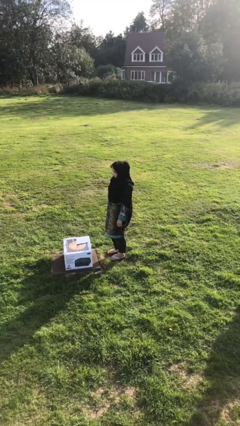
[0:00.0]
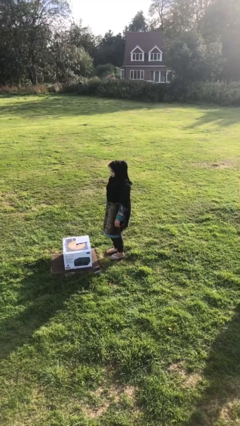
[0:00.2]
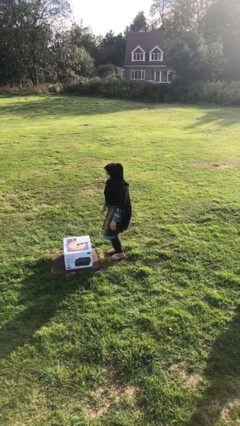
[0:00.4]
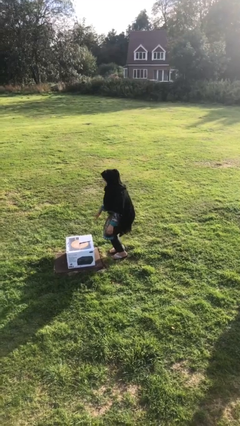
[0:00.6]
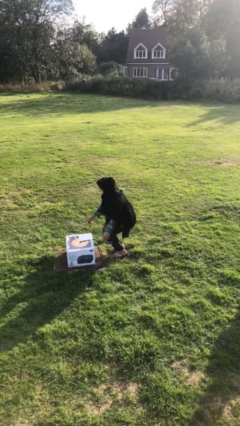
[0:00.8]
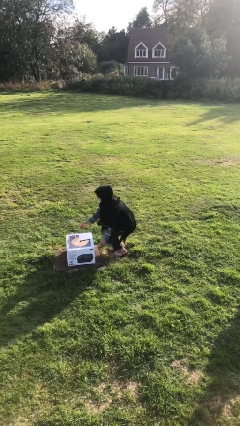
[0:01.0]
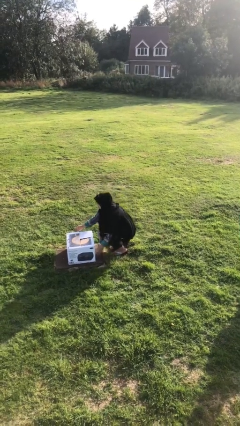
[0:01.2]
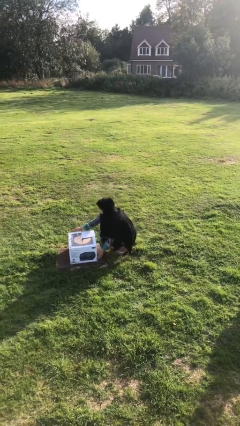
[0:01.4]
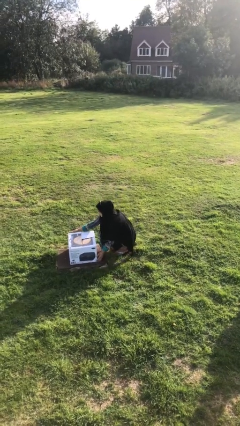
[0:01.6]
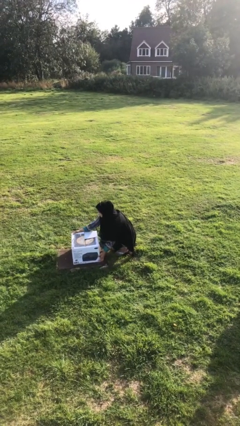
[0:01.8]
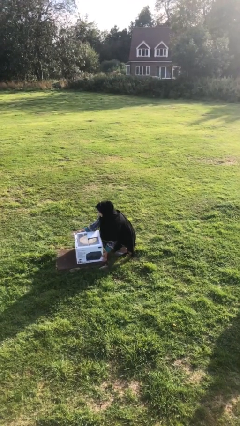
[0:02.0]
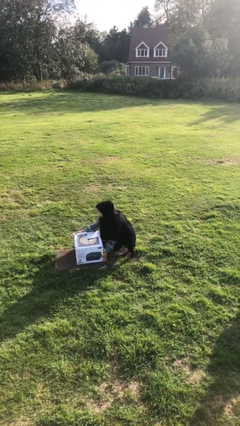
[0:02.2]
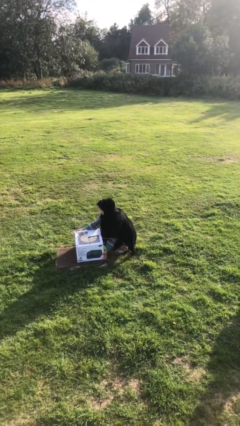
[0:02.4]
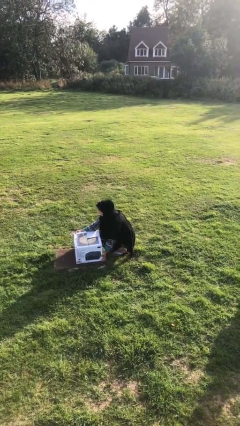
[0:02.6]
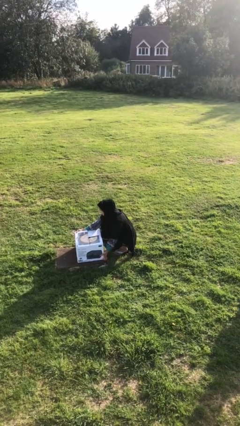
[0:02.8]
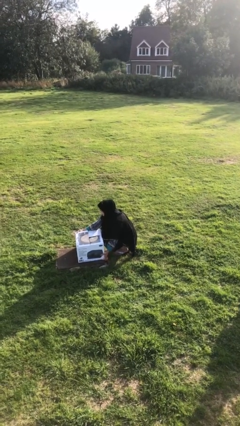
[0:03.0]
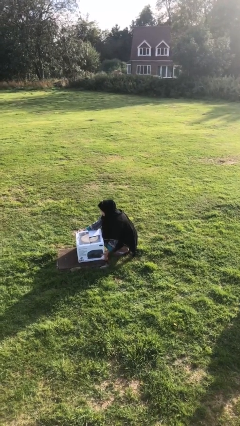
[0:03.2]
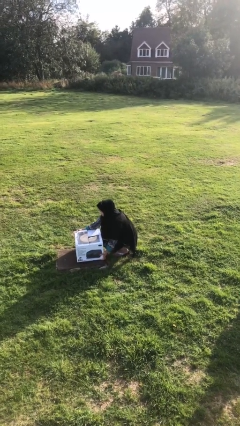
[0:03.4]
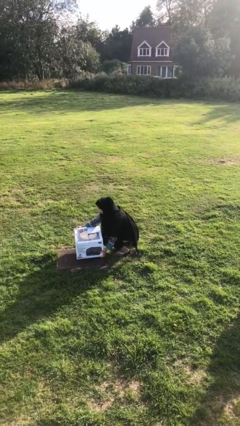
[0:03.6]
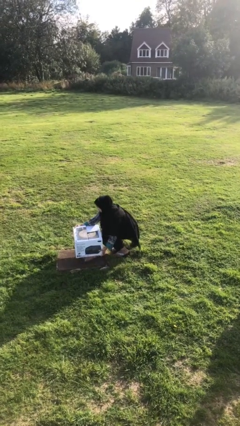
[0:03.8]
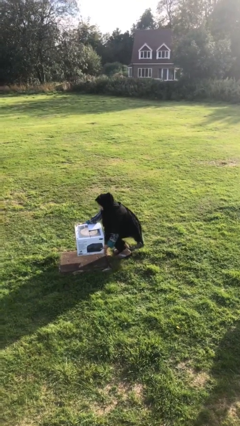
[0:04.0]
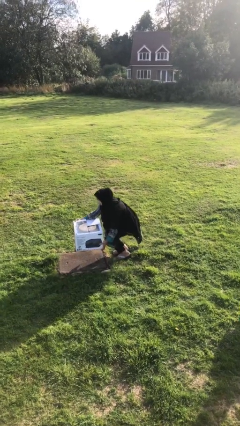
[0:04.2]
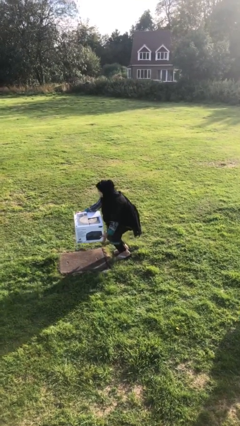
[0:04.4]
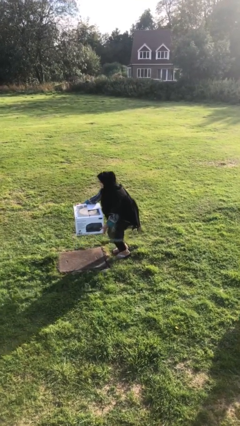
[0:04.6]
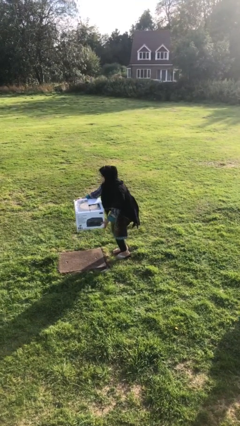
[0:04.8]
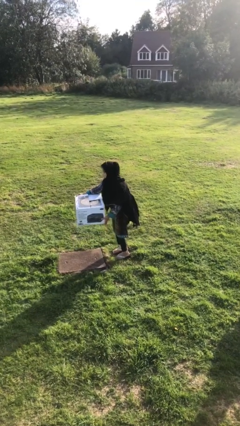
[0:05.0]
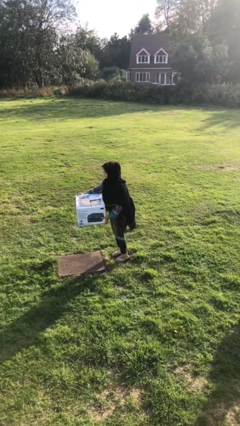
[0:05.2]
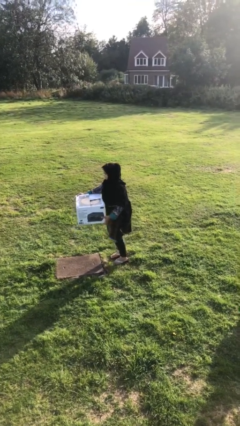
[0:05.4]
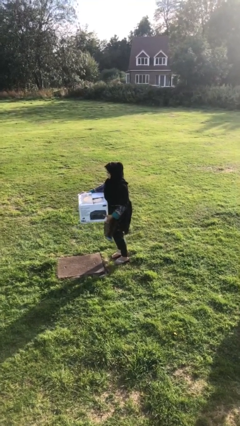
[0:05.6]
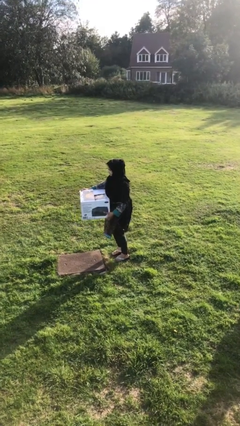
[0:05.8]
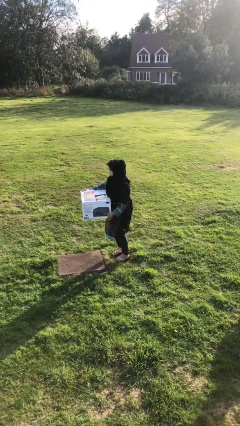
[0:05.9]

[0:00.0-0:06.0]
person picks up object from floor

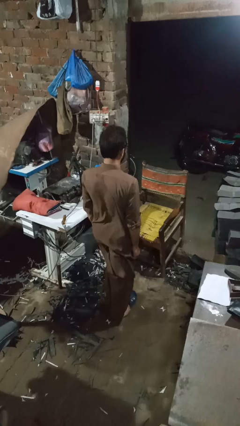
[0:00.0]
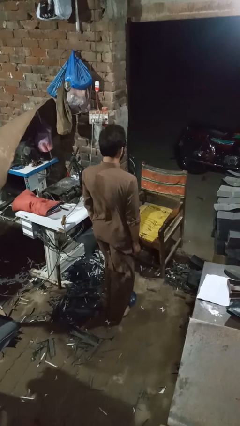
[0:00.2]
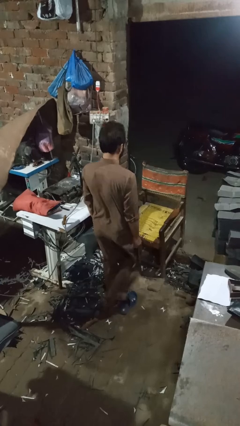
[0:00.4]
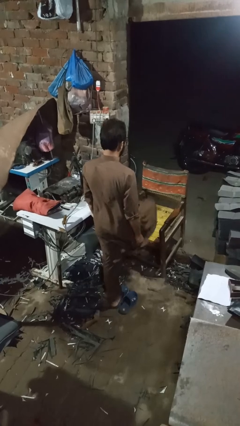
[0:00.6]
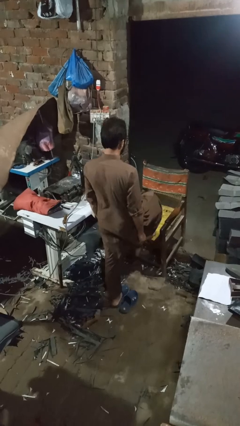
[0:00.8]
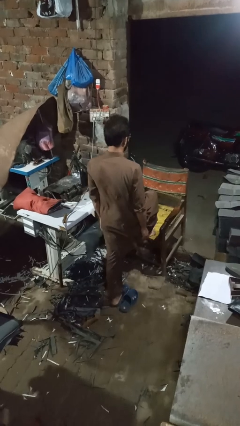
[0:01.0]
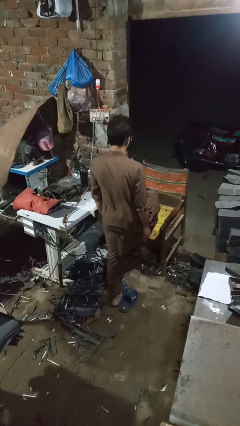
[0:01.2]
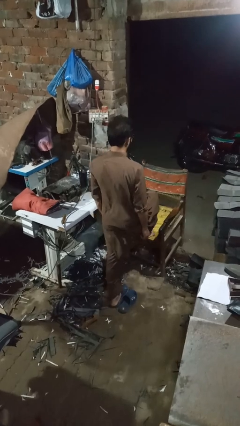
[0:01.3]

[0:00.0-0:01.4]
person stubs toe

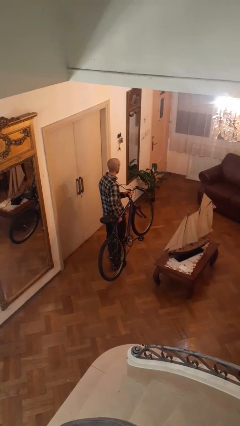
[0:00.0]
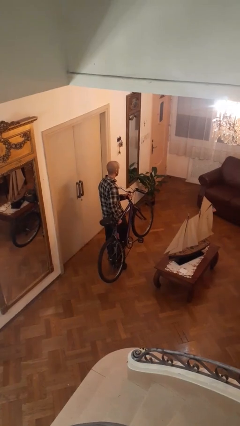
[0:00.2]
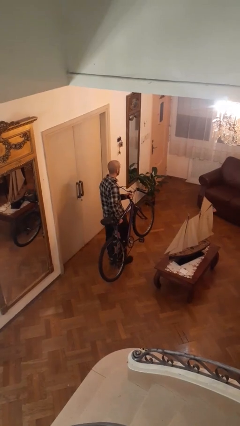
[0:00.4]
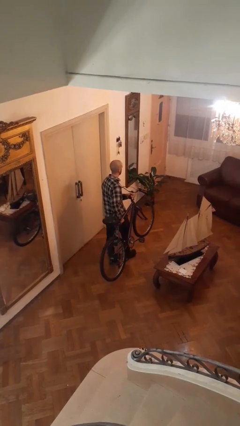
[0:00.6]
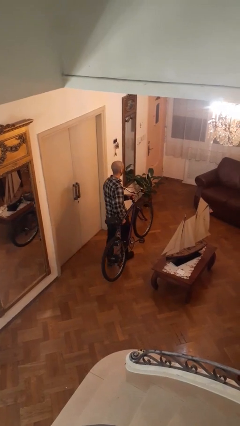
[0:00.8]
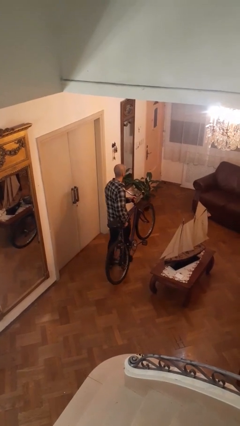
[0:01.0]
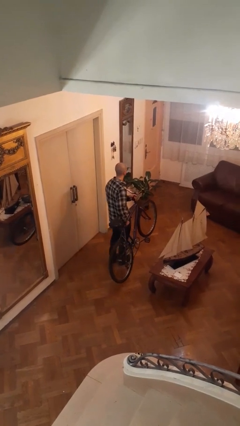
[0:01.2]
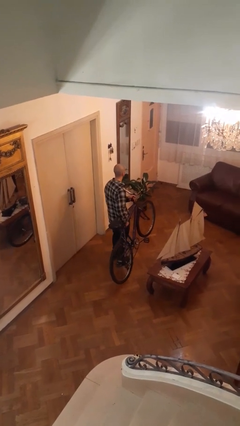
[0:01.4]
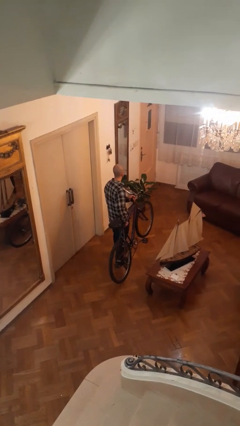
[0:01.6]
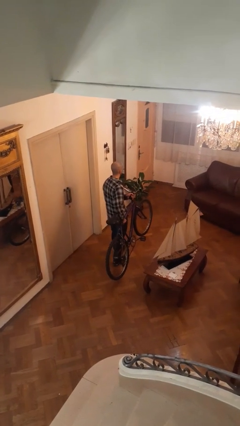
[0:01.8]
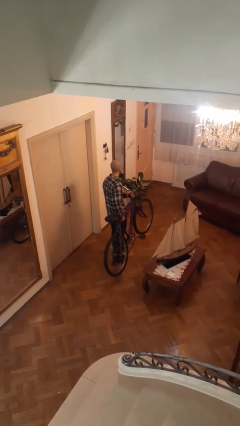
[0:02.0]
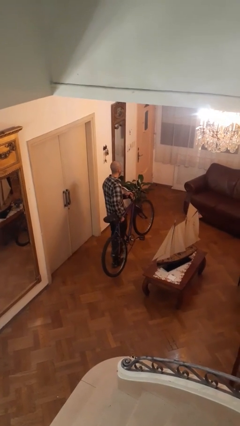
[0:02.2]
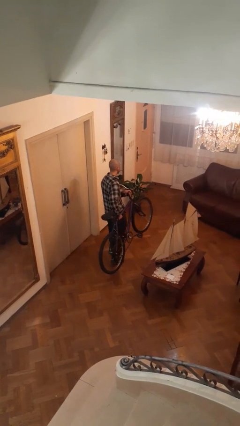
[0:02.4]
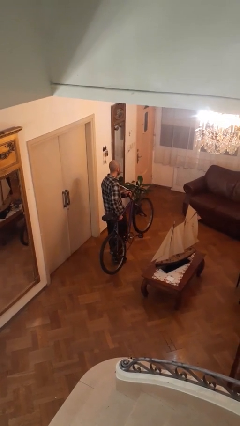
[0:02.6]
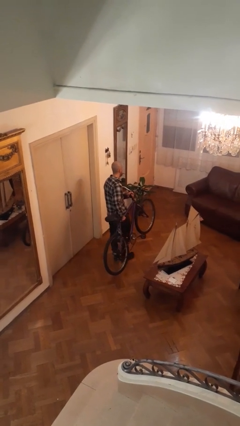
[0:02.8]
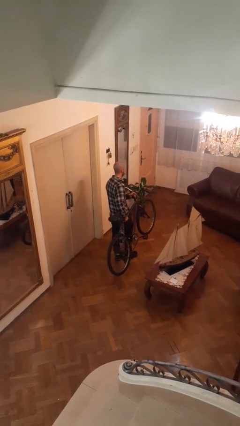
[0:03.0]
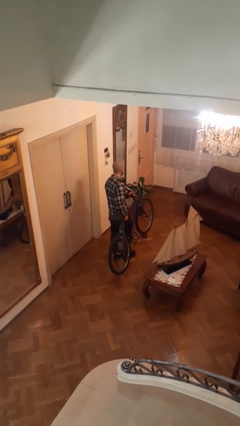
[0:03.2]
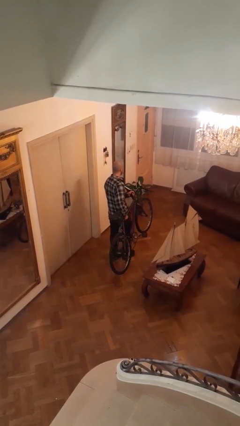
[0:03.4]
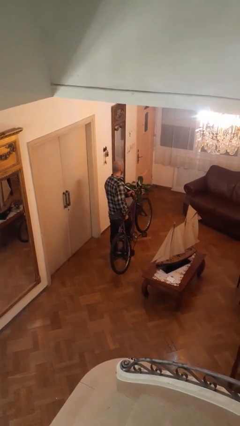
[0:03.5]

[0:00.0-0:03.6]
person carries bicycle

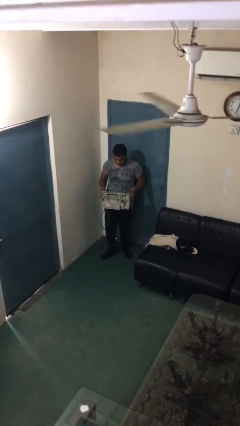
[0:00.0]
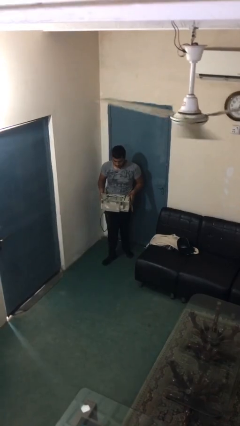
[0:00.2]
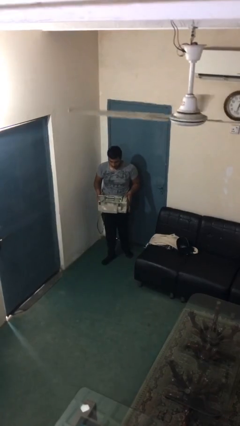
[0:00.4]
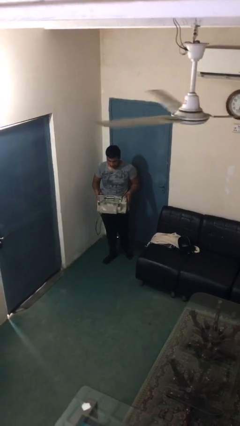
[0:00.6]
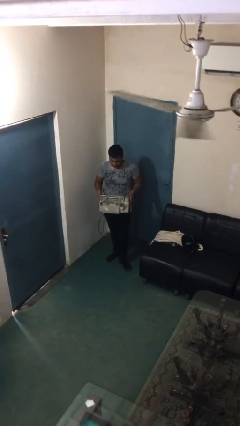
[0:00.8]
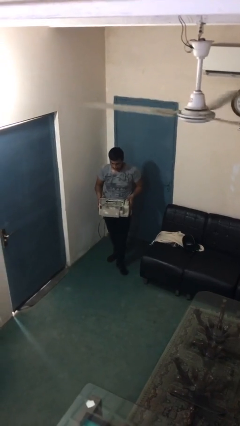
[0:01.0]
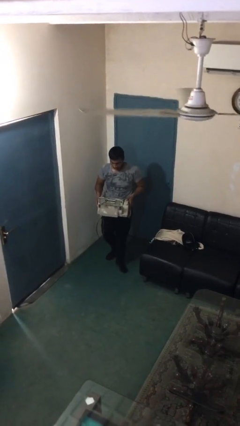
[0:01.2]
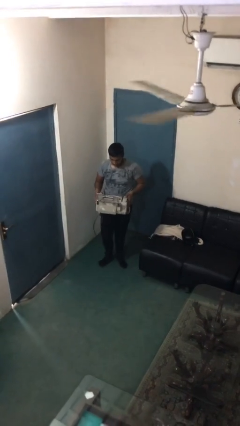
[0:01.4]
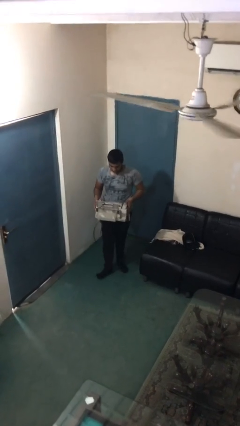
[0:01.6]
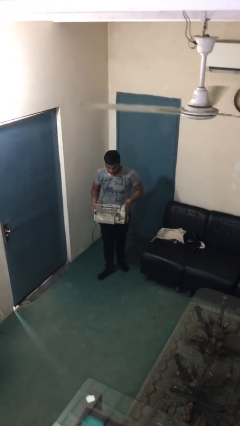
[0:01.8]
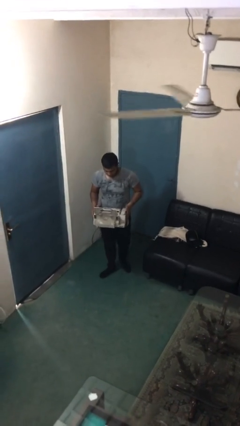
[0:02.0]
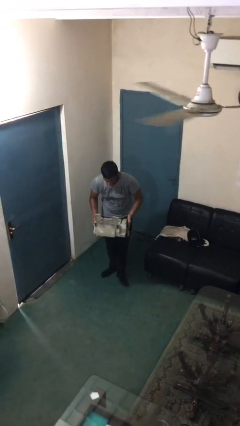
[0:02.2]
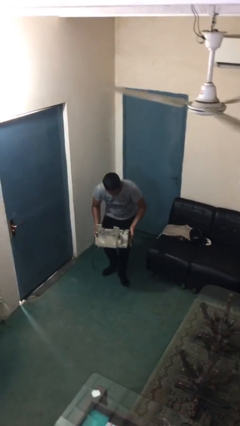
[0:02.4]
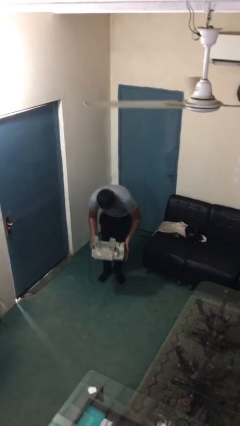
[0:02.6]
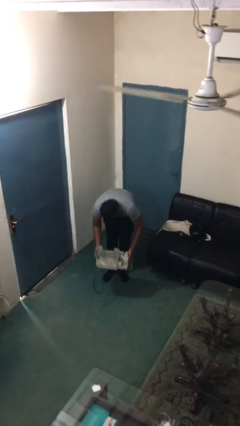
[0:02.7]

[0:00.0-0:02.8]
person carries heavy object

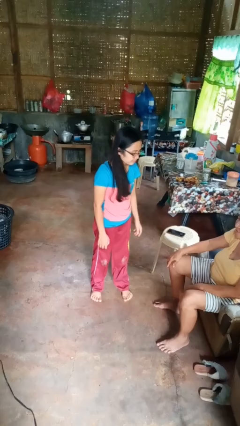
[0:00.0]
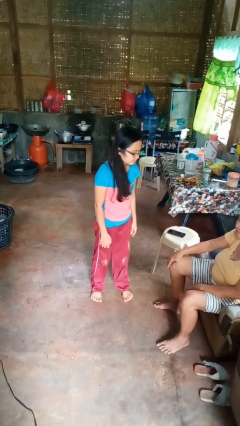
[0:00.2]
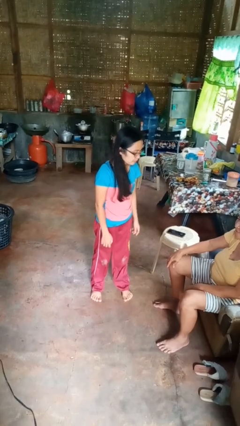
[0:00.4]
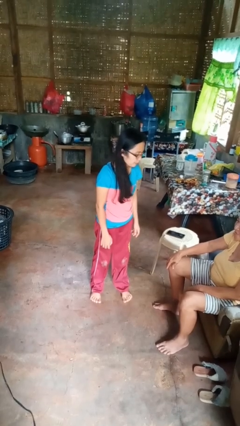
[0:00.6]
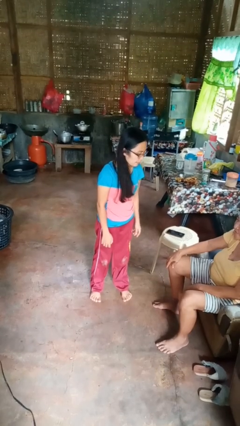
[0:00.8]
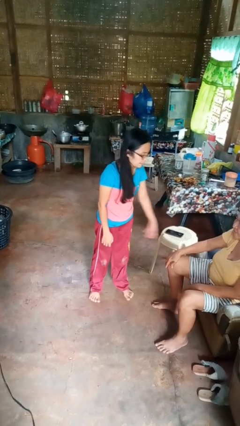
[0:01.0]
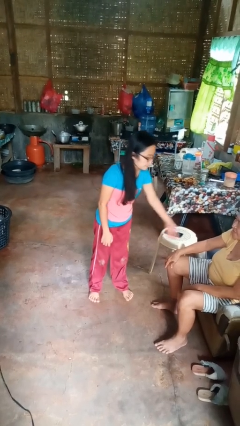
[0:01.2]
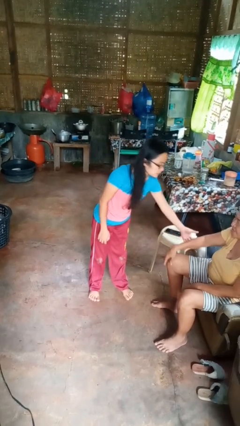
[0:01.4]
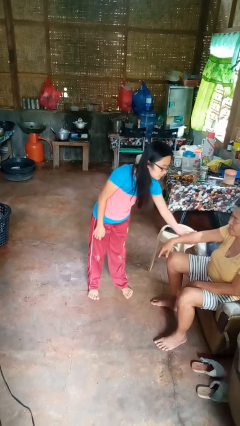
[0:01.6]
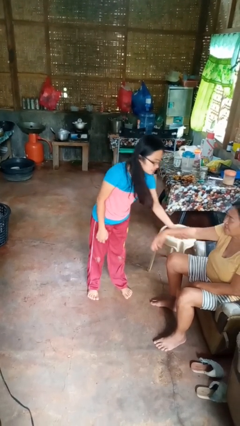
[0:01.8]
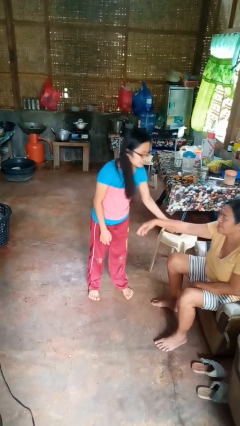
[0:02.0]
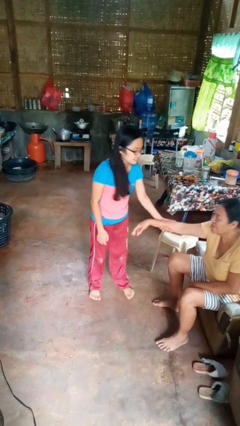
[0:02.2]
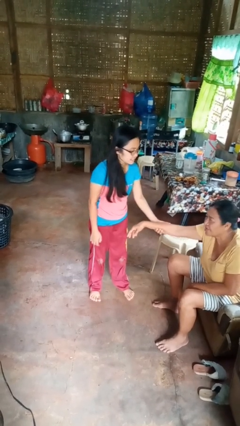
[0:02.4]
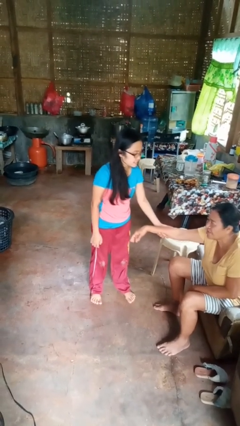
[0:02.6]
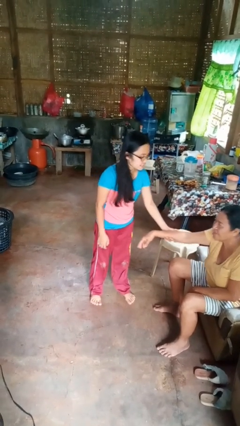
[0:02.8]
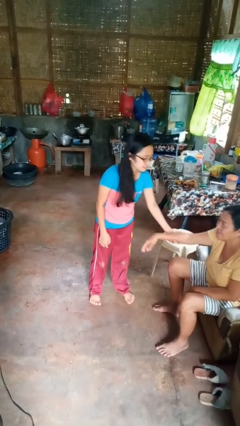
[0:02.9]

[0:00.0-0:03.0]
person grabs person by forearm

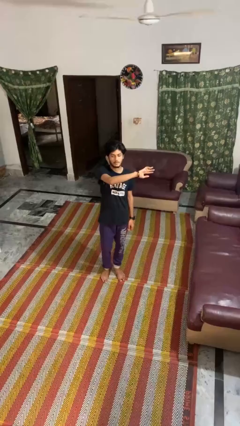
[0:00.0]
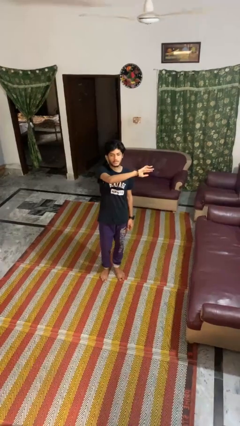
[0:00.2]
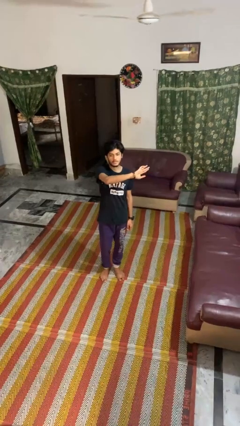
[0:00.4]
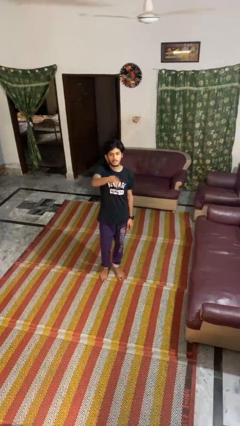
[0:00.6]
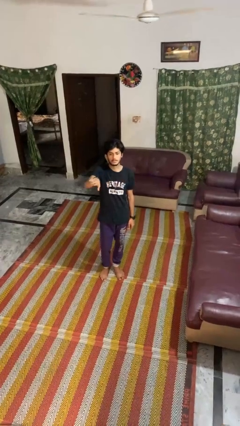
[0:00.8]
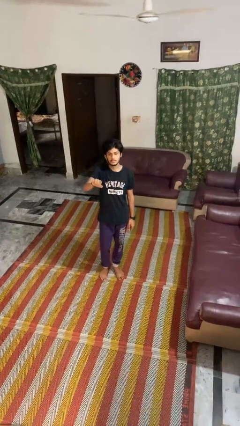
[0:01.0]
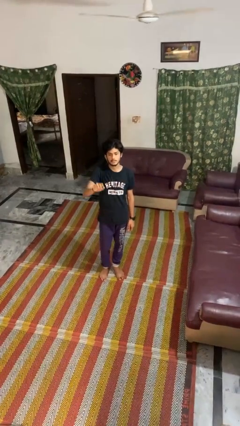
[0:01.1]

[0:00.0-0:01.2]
person gestures swipe right
